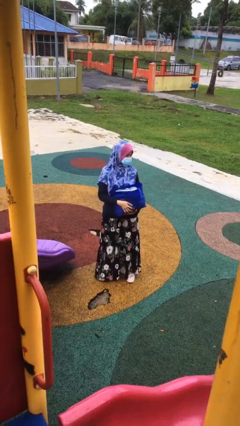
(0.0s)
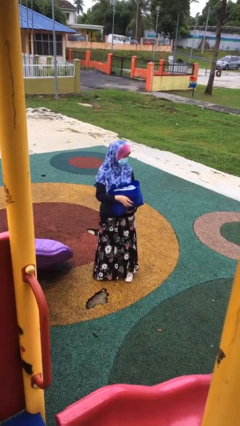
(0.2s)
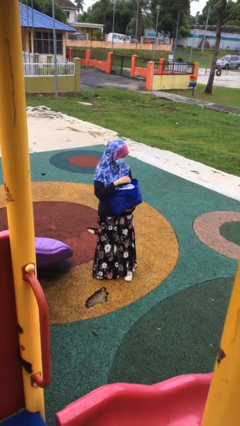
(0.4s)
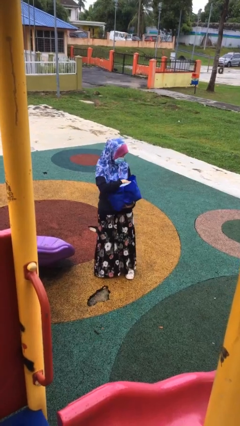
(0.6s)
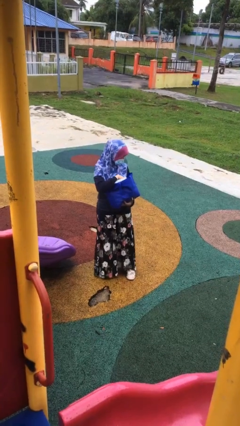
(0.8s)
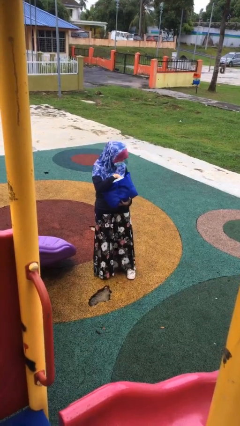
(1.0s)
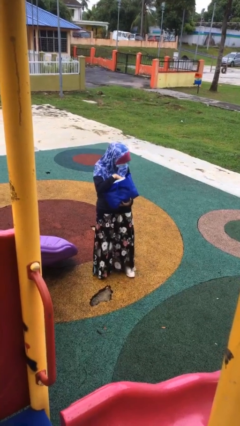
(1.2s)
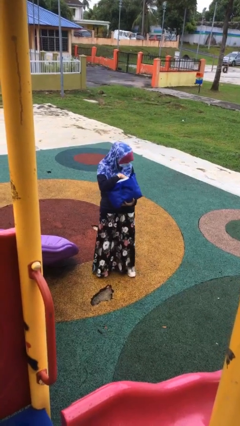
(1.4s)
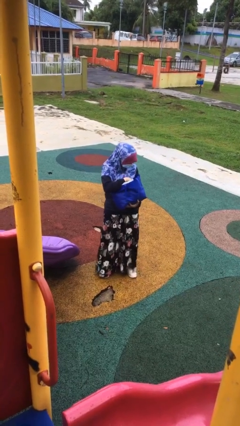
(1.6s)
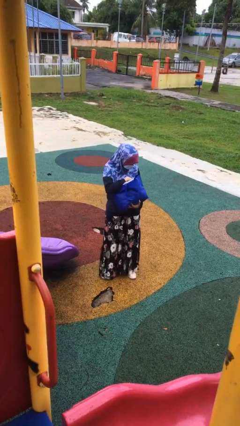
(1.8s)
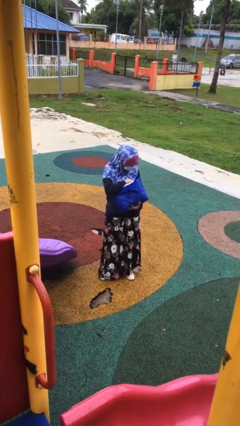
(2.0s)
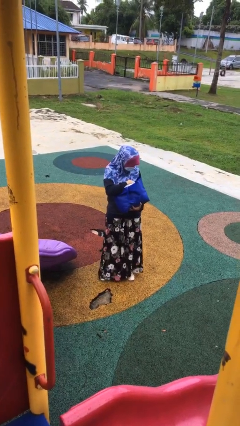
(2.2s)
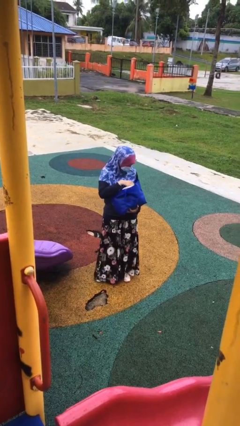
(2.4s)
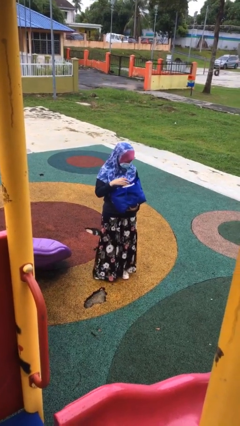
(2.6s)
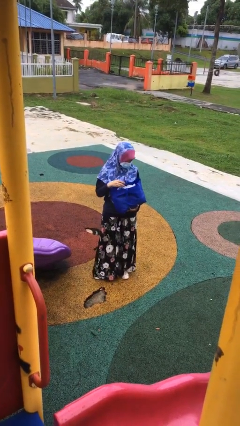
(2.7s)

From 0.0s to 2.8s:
person searches in bag

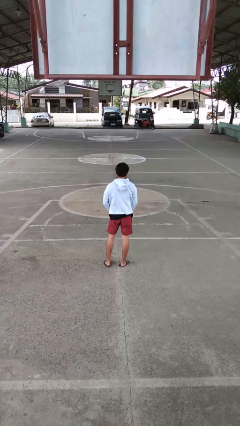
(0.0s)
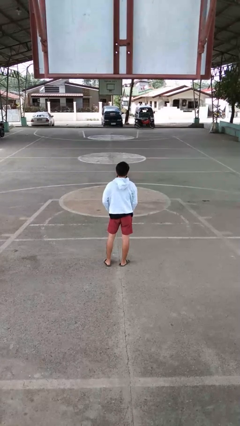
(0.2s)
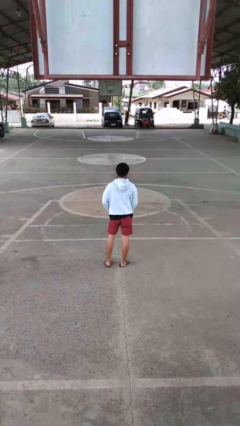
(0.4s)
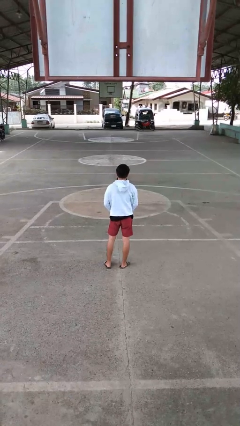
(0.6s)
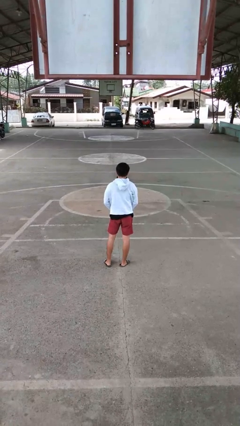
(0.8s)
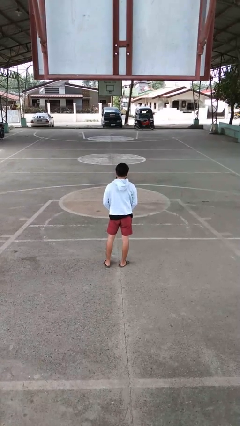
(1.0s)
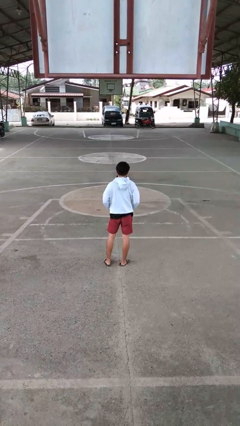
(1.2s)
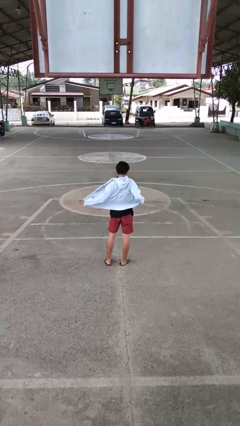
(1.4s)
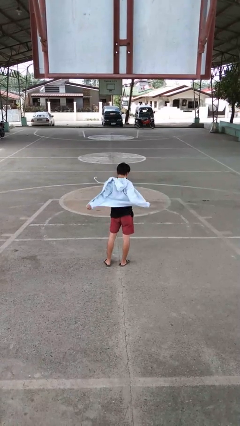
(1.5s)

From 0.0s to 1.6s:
person unzips jacket

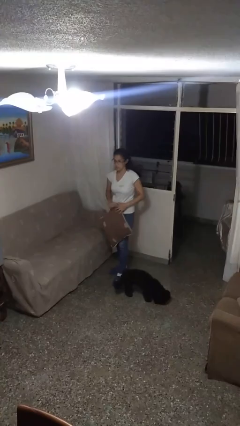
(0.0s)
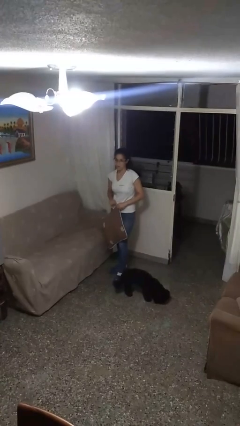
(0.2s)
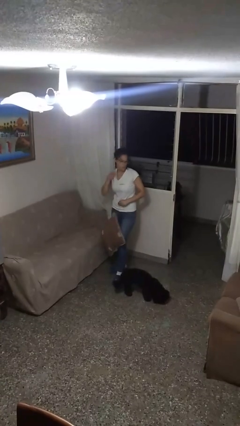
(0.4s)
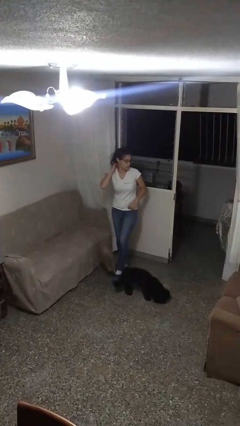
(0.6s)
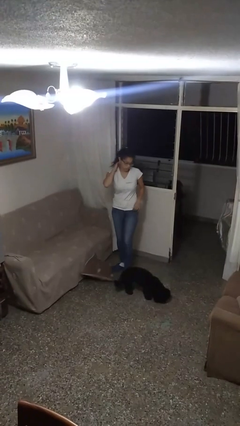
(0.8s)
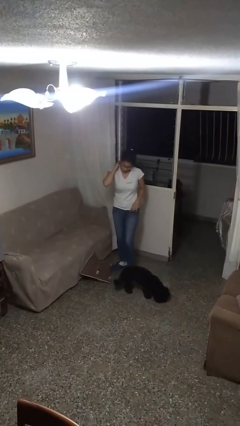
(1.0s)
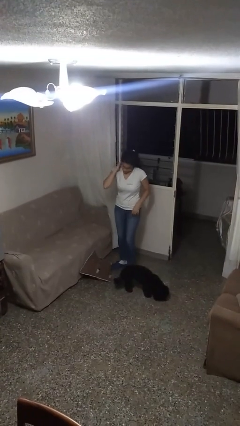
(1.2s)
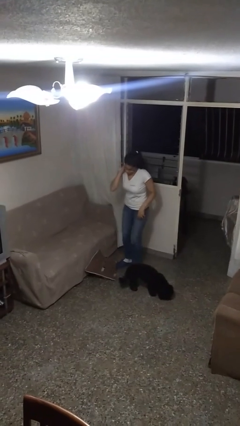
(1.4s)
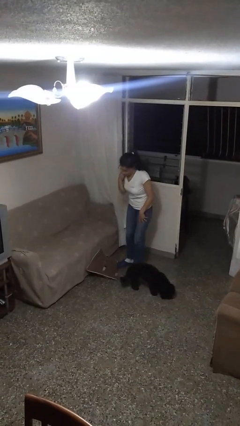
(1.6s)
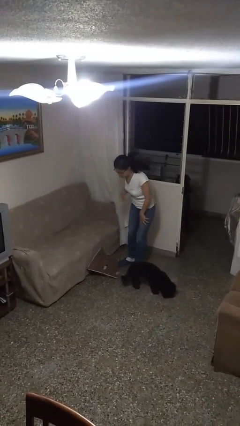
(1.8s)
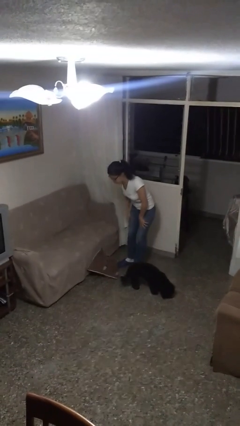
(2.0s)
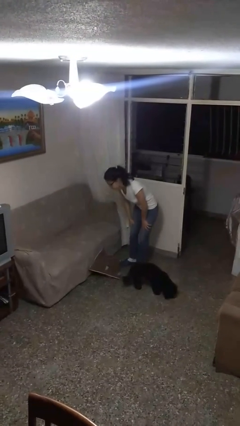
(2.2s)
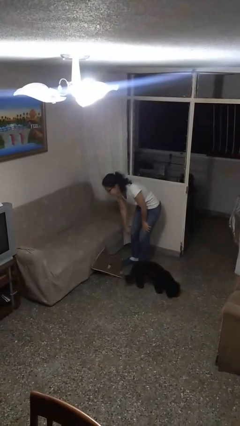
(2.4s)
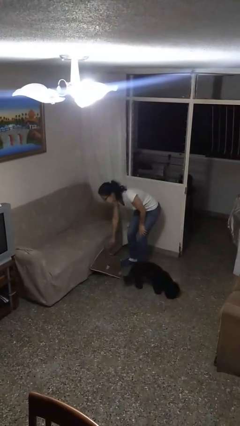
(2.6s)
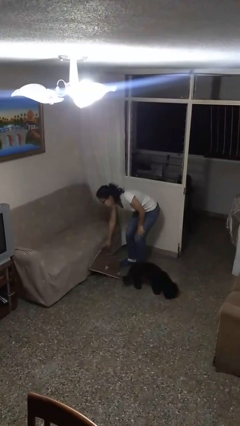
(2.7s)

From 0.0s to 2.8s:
person drops object

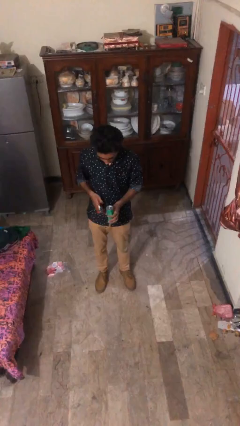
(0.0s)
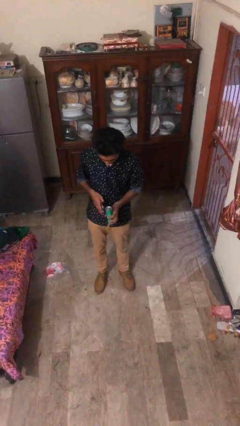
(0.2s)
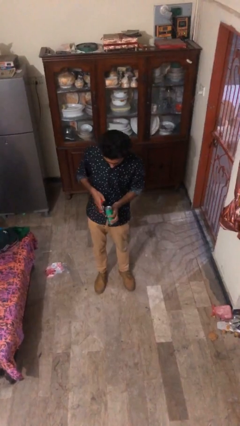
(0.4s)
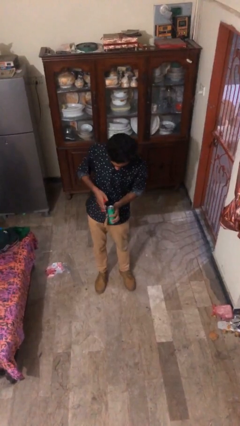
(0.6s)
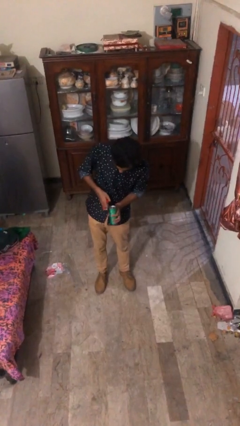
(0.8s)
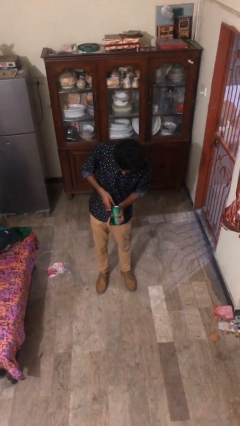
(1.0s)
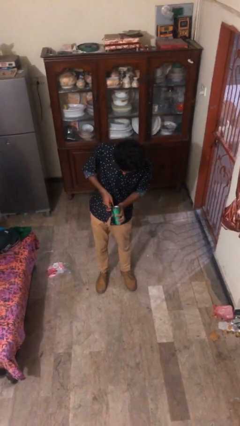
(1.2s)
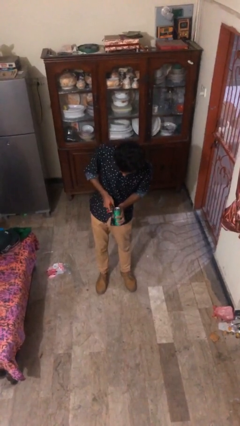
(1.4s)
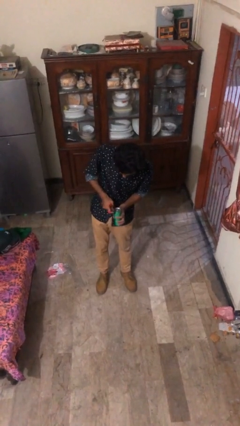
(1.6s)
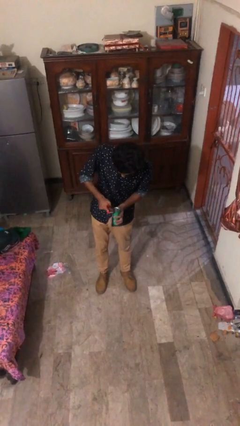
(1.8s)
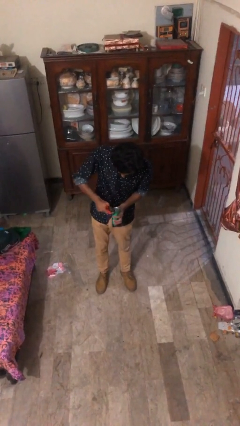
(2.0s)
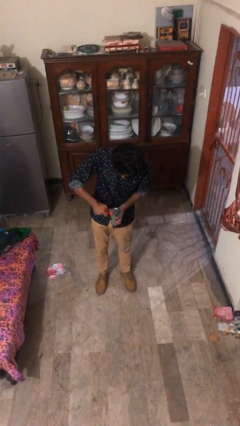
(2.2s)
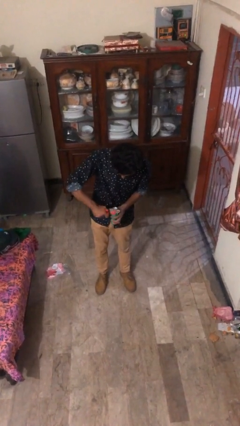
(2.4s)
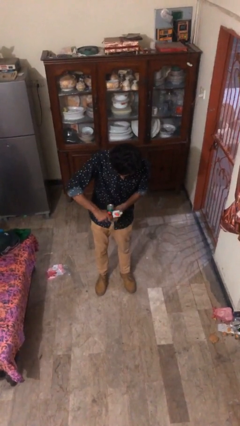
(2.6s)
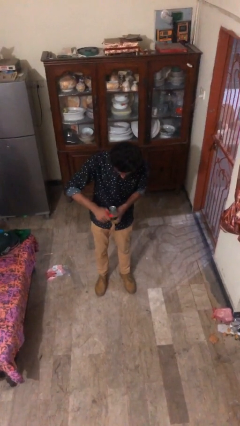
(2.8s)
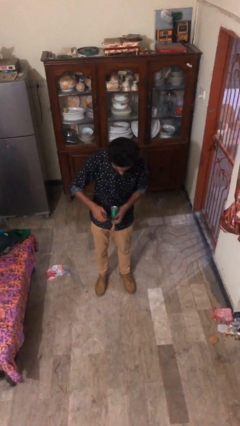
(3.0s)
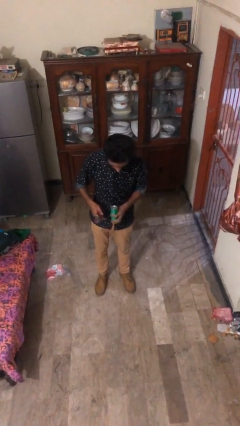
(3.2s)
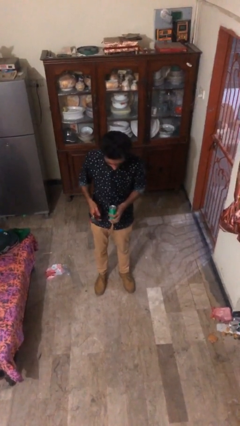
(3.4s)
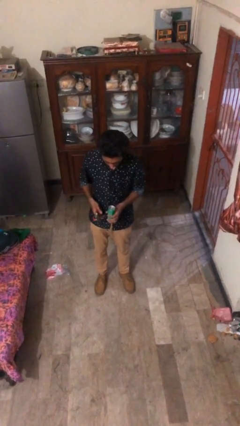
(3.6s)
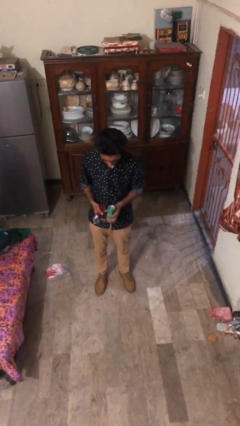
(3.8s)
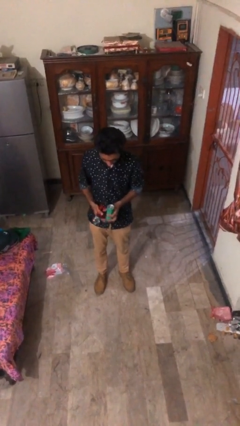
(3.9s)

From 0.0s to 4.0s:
person opens can with can opener

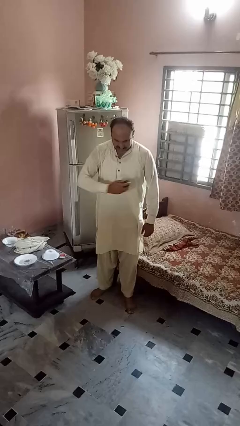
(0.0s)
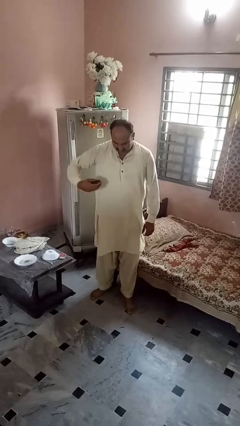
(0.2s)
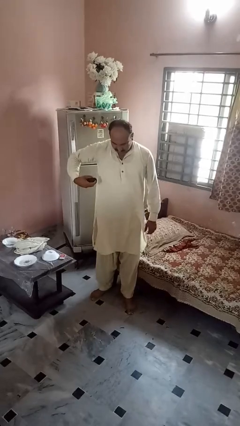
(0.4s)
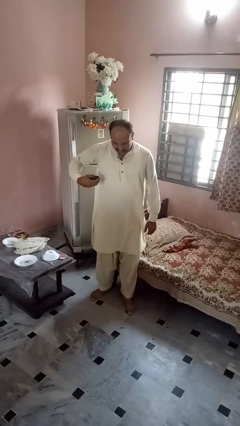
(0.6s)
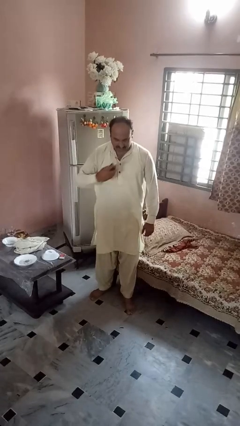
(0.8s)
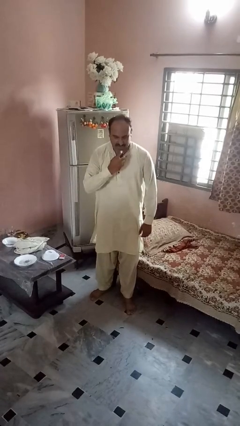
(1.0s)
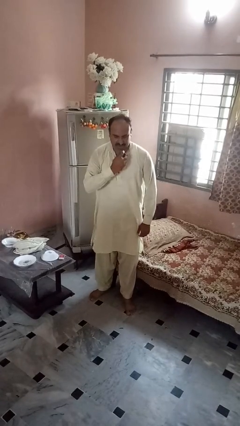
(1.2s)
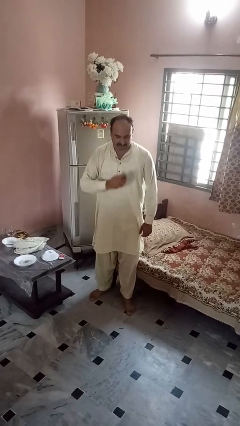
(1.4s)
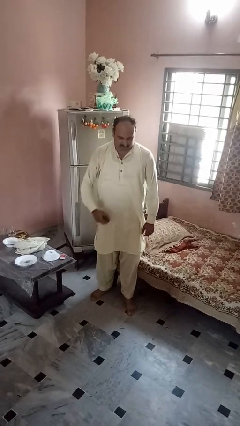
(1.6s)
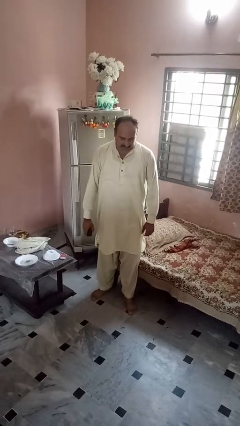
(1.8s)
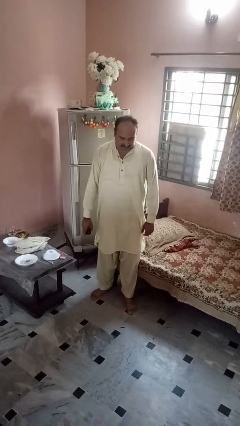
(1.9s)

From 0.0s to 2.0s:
person applies deodorant

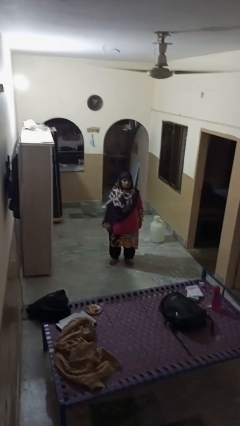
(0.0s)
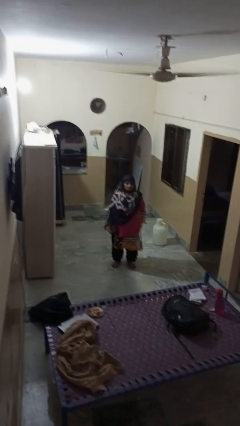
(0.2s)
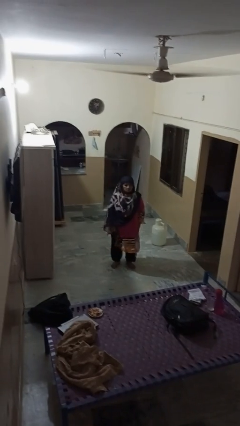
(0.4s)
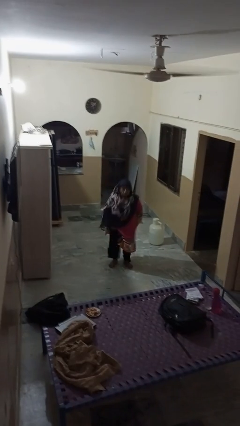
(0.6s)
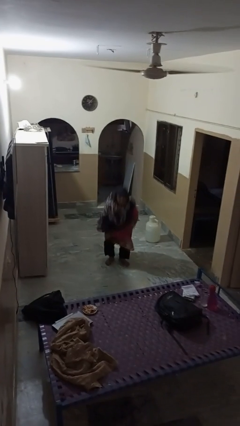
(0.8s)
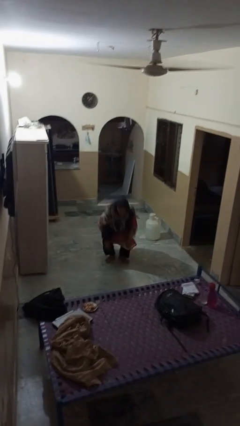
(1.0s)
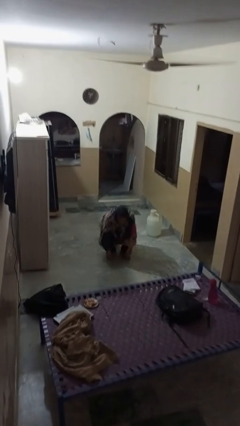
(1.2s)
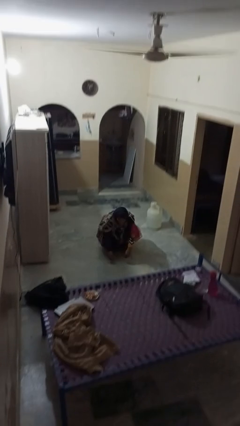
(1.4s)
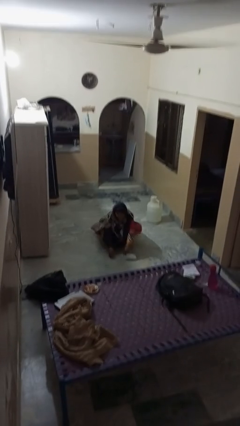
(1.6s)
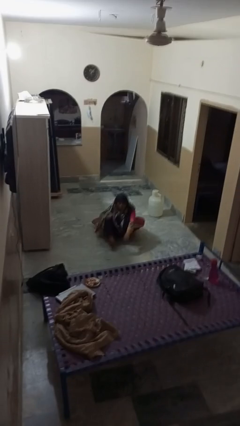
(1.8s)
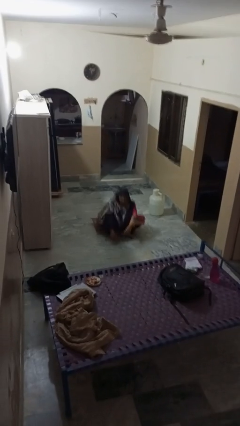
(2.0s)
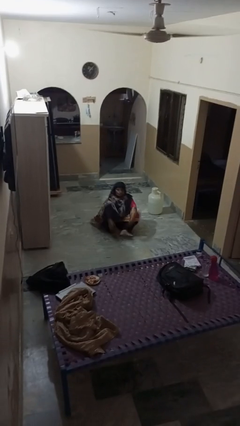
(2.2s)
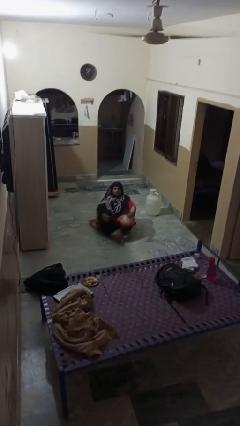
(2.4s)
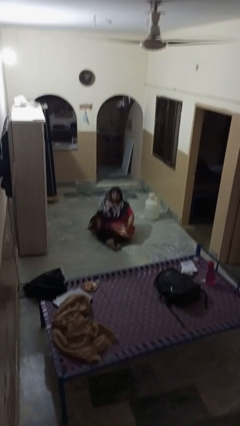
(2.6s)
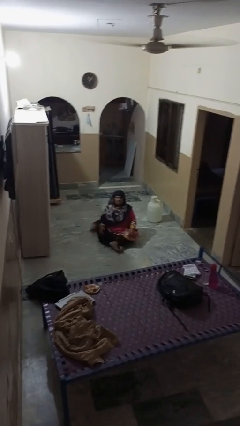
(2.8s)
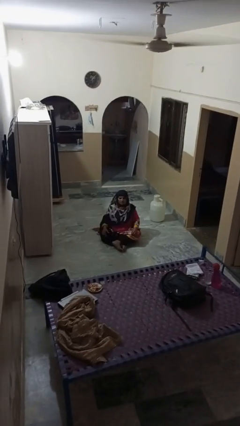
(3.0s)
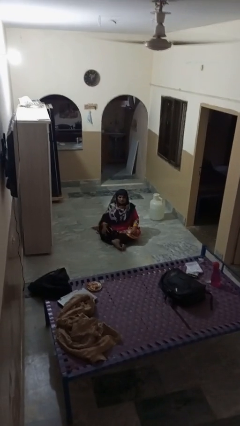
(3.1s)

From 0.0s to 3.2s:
person sits crisscross

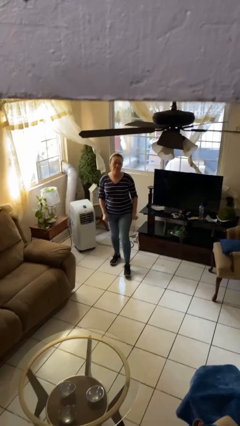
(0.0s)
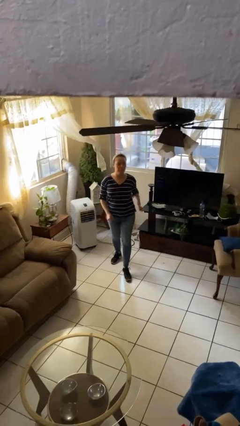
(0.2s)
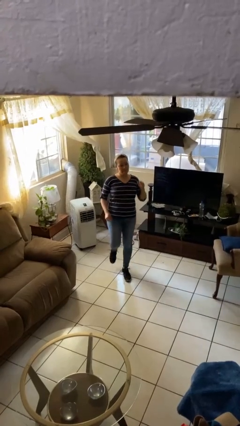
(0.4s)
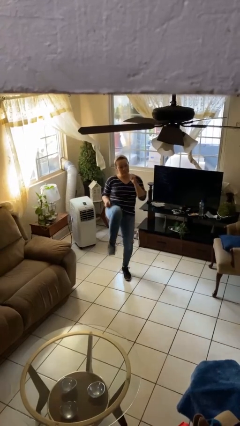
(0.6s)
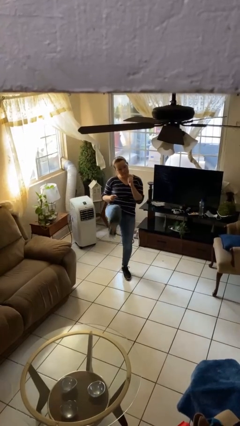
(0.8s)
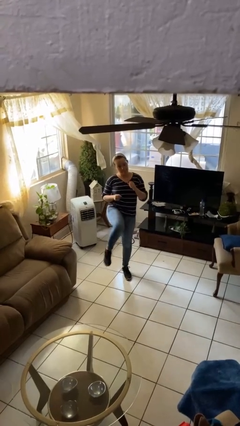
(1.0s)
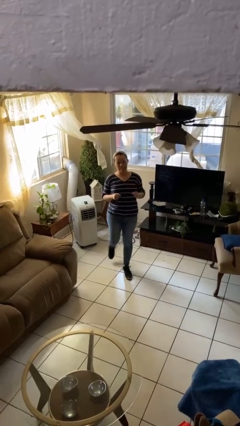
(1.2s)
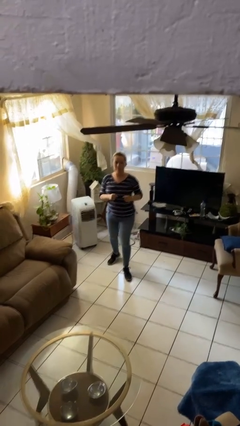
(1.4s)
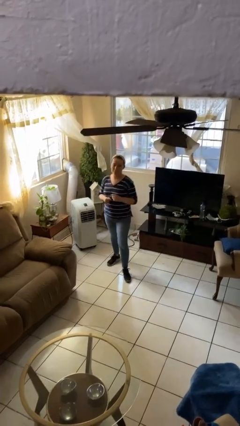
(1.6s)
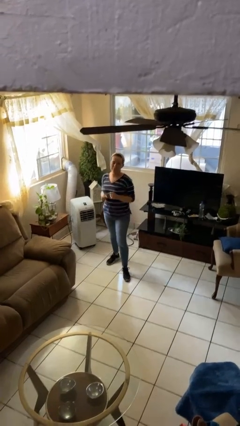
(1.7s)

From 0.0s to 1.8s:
person karate kicks
